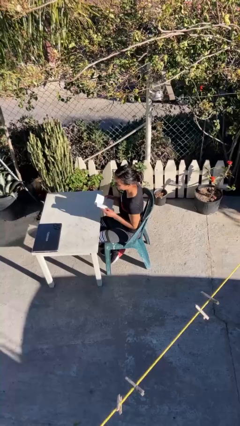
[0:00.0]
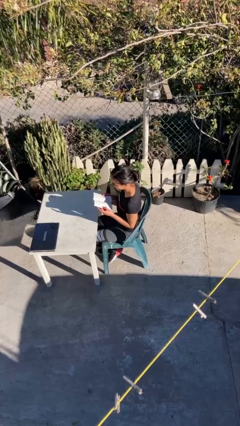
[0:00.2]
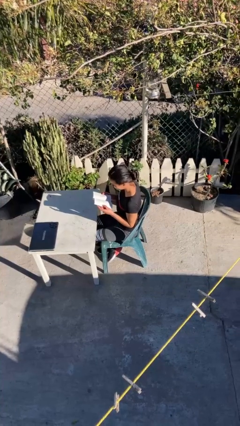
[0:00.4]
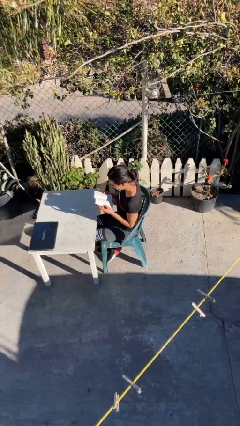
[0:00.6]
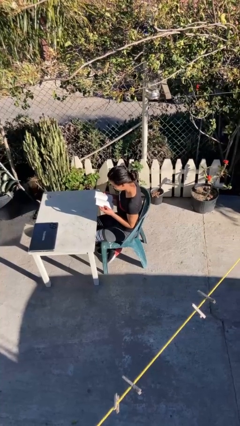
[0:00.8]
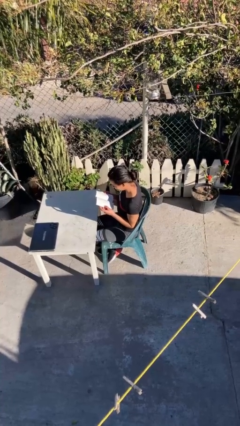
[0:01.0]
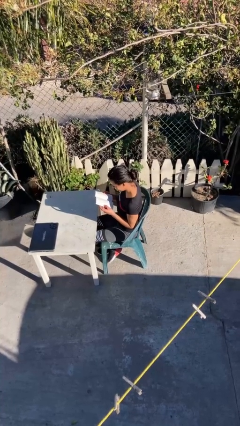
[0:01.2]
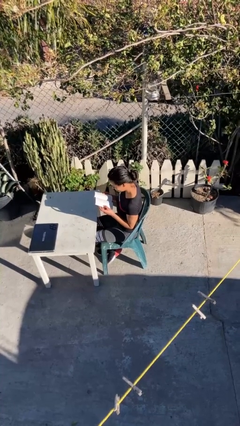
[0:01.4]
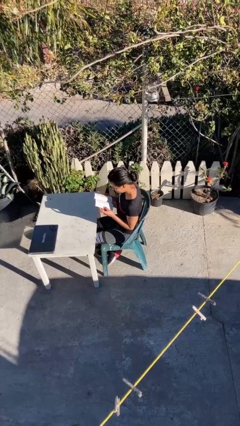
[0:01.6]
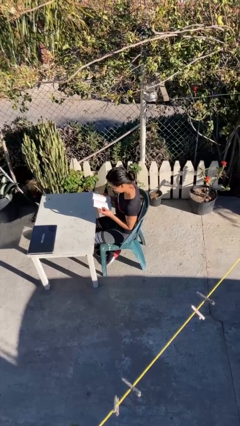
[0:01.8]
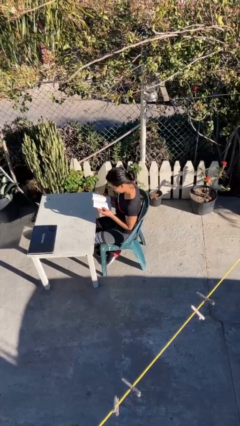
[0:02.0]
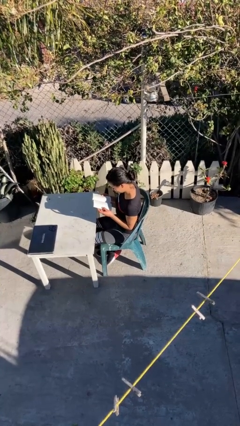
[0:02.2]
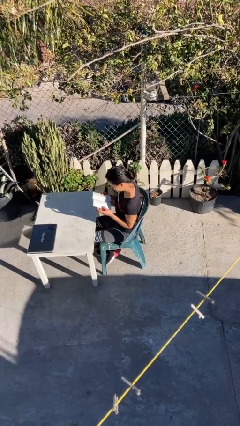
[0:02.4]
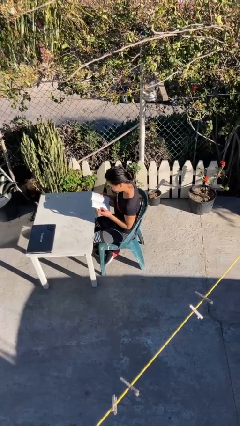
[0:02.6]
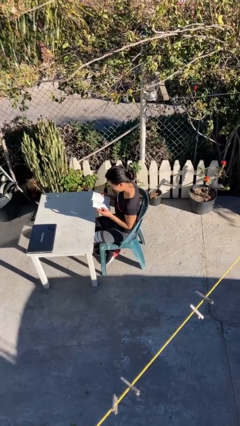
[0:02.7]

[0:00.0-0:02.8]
person reads document

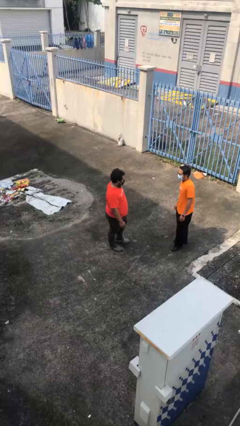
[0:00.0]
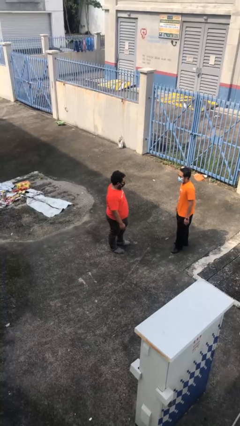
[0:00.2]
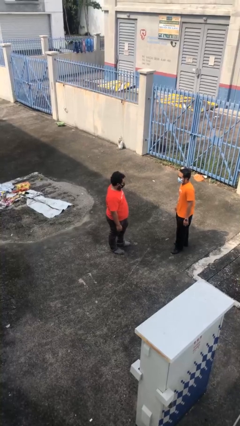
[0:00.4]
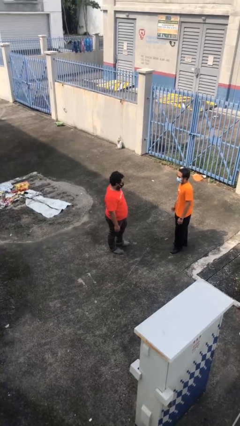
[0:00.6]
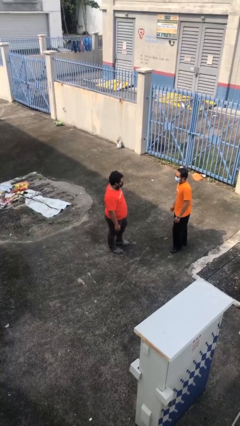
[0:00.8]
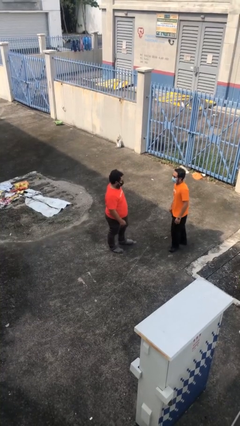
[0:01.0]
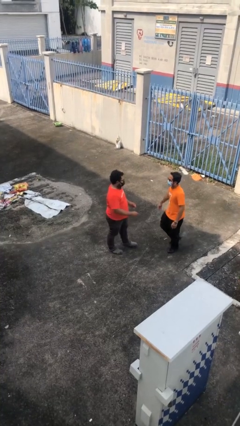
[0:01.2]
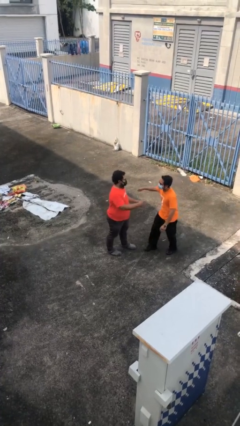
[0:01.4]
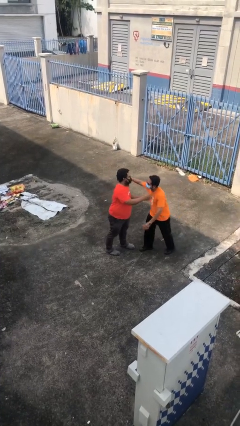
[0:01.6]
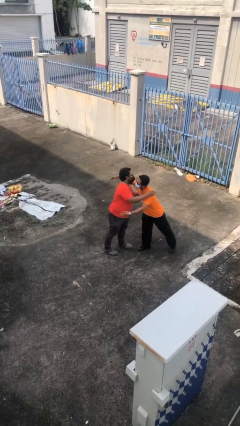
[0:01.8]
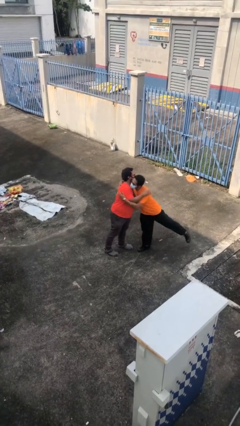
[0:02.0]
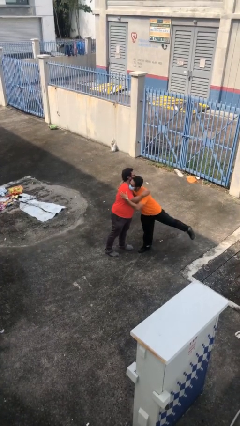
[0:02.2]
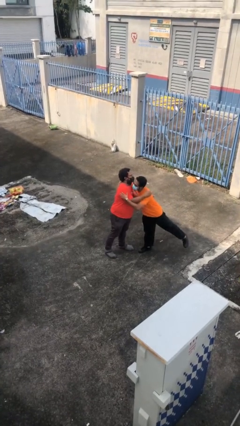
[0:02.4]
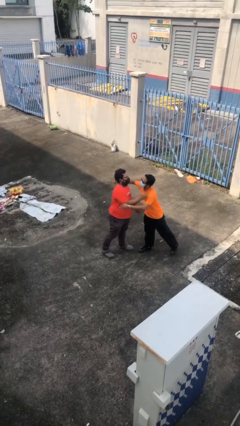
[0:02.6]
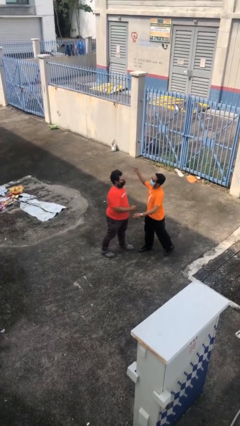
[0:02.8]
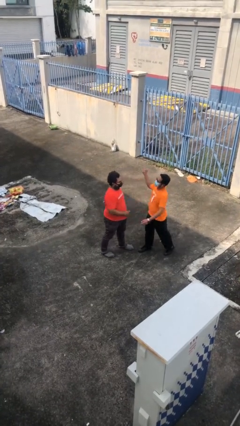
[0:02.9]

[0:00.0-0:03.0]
person embraces person

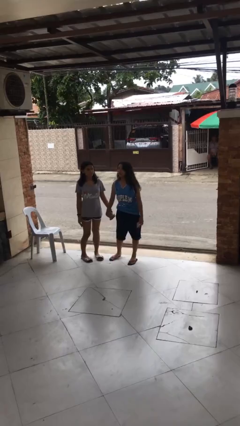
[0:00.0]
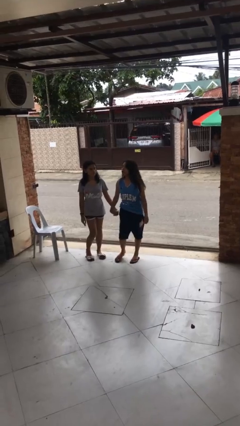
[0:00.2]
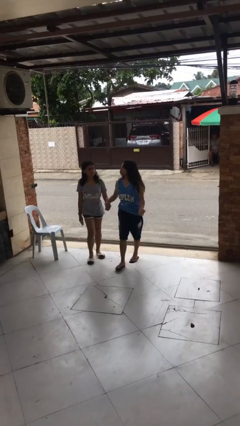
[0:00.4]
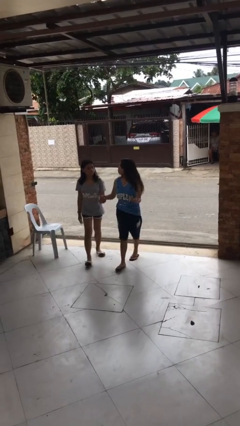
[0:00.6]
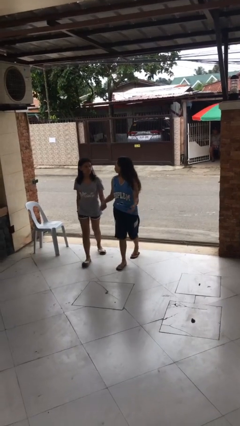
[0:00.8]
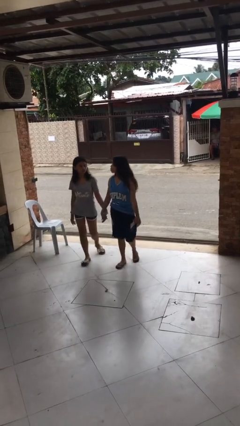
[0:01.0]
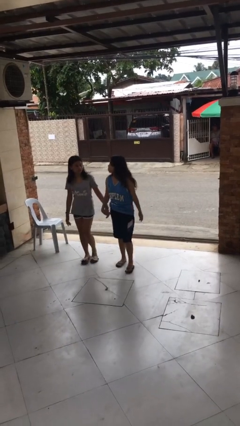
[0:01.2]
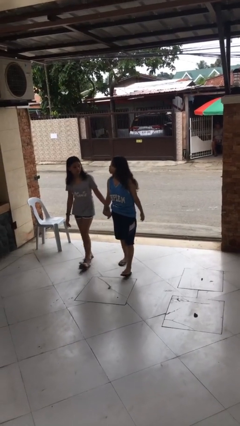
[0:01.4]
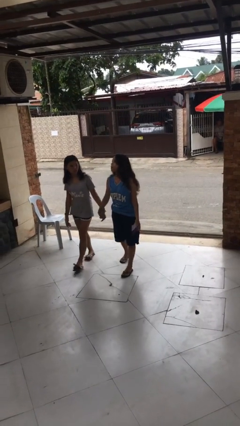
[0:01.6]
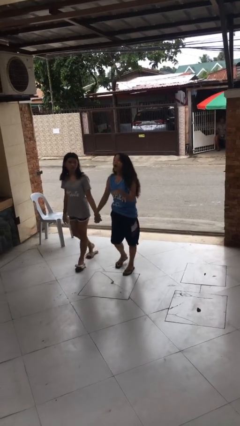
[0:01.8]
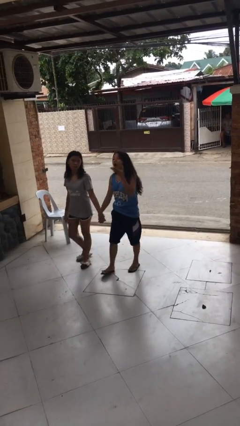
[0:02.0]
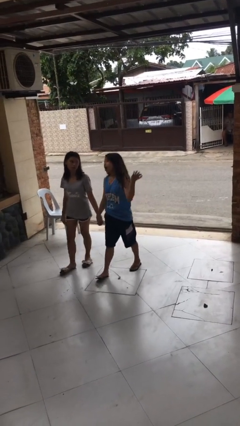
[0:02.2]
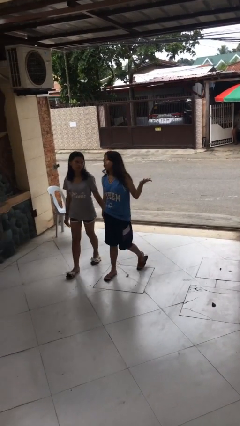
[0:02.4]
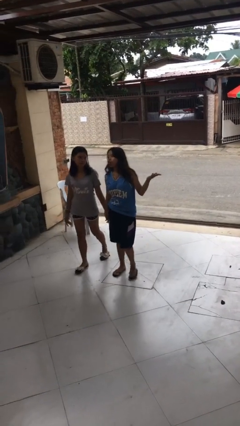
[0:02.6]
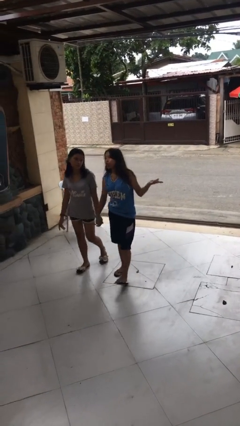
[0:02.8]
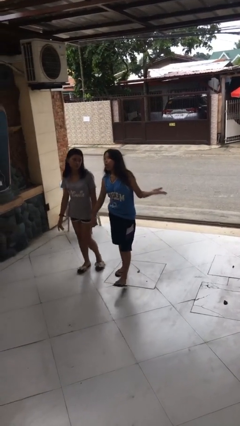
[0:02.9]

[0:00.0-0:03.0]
person holds hand

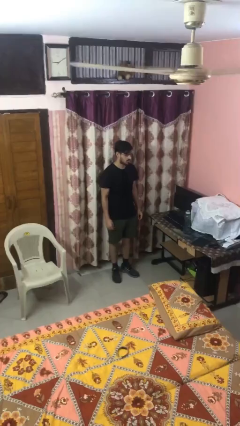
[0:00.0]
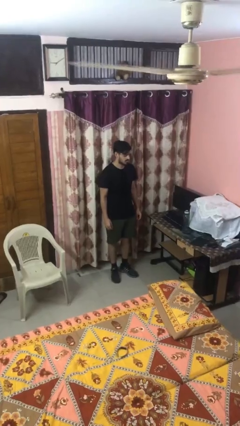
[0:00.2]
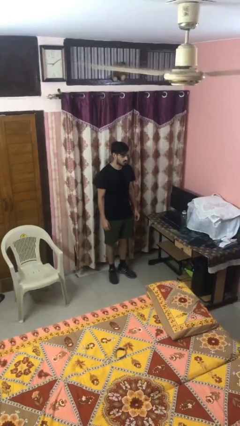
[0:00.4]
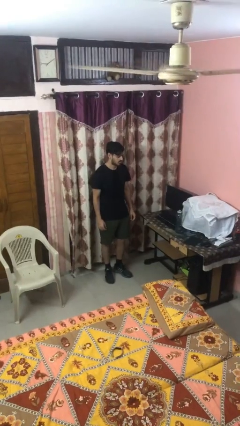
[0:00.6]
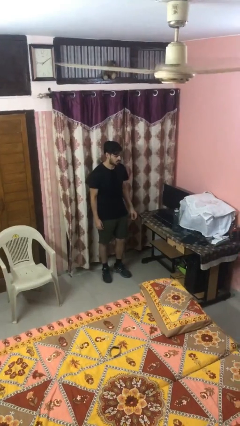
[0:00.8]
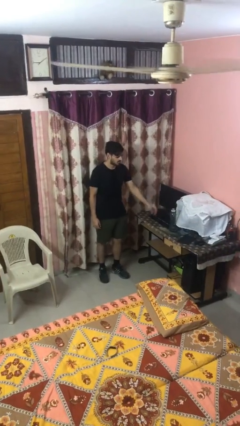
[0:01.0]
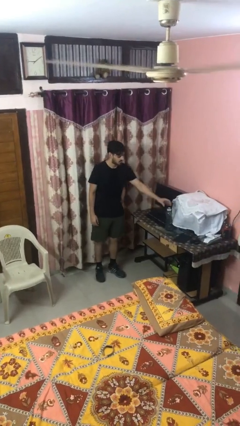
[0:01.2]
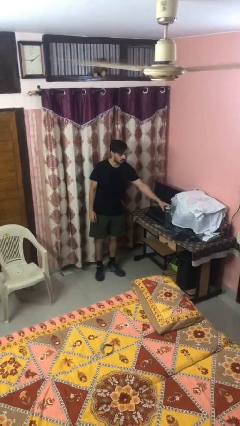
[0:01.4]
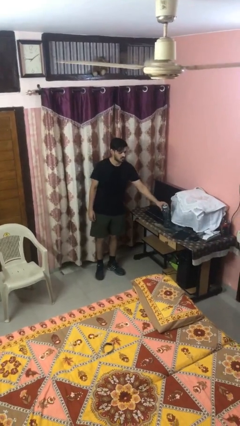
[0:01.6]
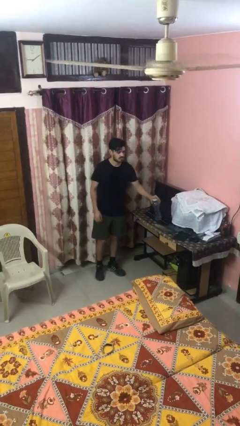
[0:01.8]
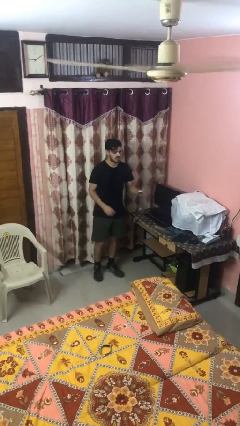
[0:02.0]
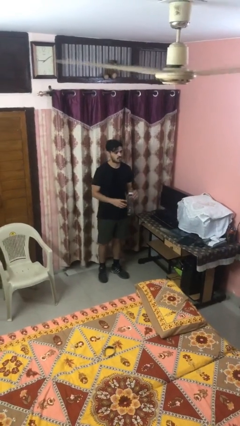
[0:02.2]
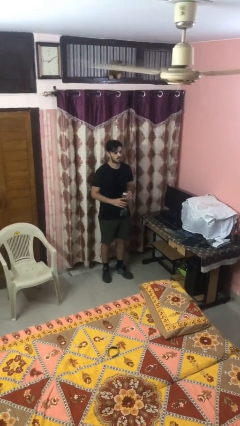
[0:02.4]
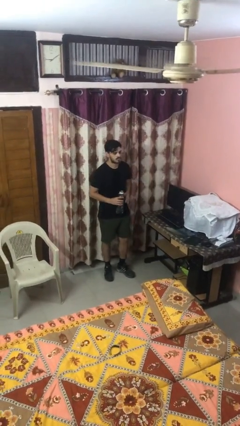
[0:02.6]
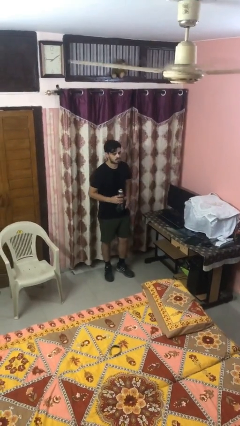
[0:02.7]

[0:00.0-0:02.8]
person picks up object from countertop

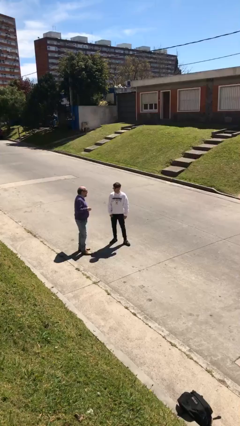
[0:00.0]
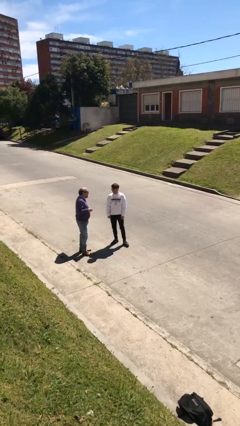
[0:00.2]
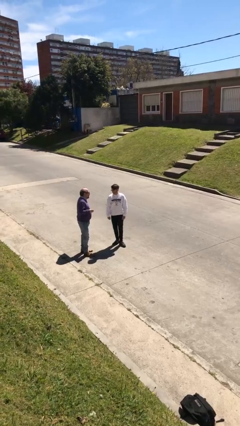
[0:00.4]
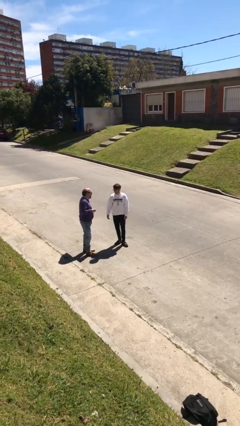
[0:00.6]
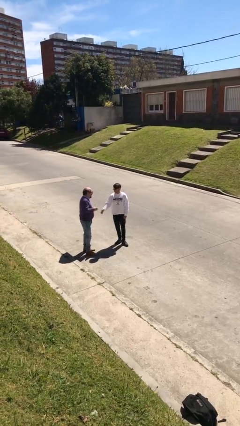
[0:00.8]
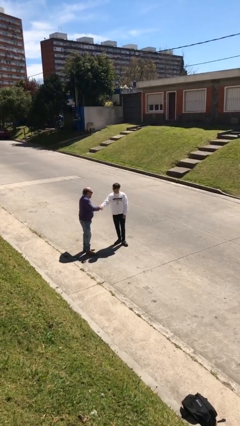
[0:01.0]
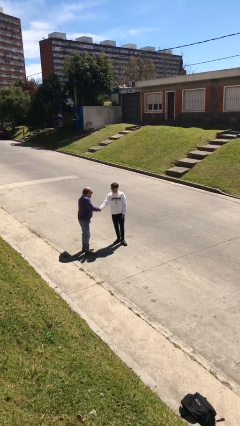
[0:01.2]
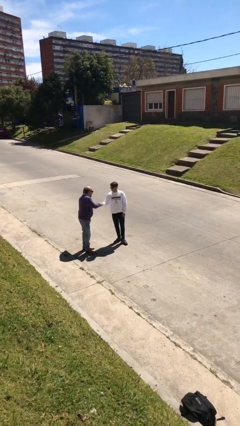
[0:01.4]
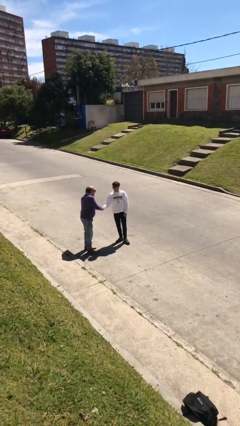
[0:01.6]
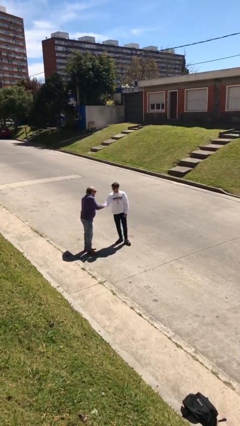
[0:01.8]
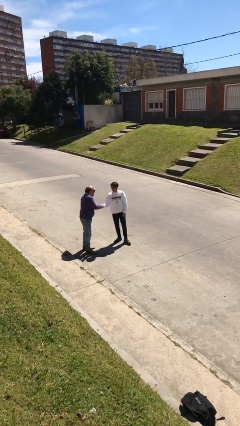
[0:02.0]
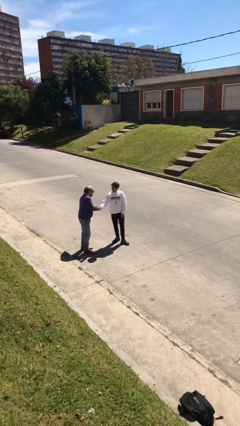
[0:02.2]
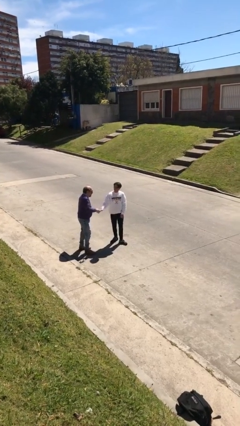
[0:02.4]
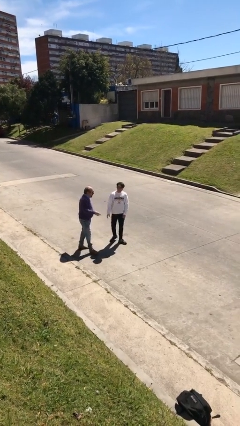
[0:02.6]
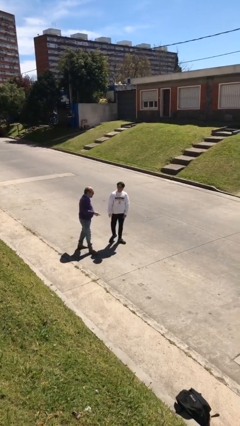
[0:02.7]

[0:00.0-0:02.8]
person shakes hand

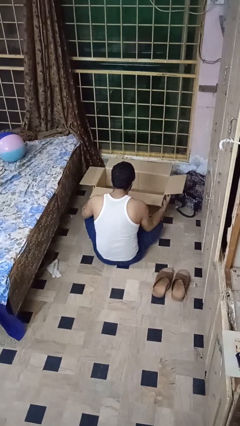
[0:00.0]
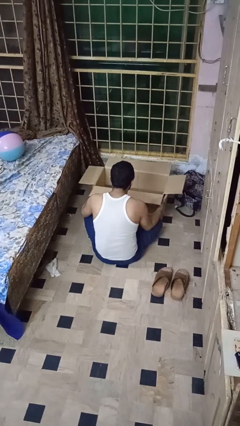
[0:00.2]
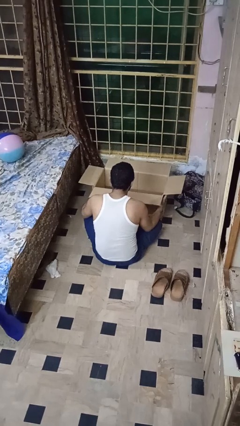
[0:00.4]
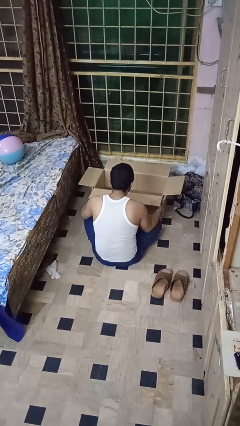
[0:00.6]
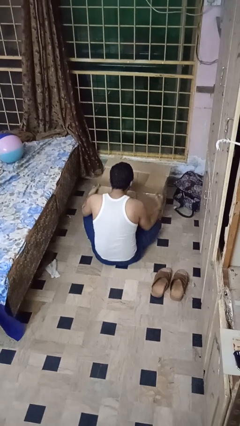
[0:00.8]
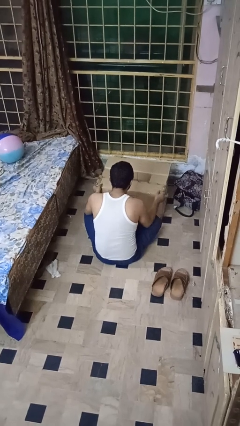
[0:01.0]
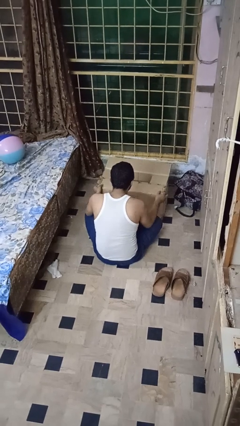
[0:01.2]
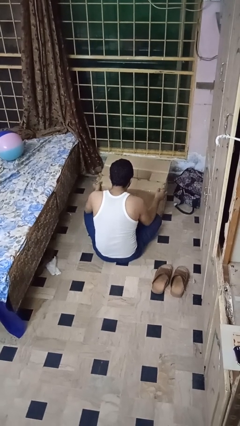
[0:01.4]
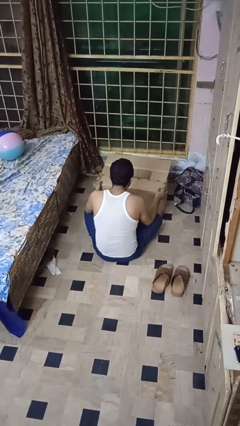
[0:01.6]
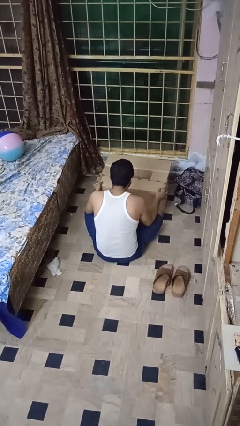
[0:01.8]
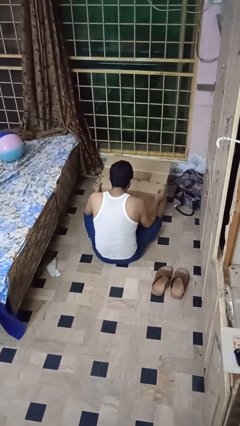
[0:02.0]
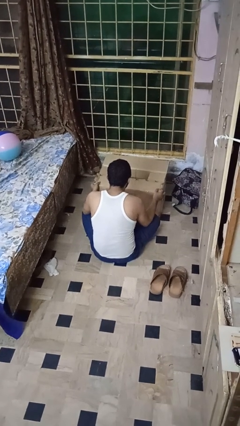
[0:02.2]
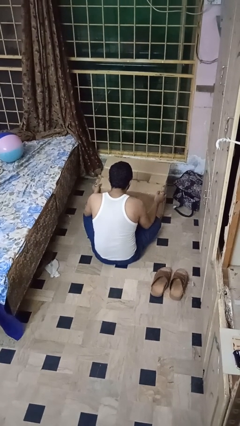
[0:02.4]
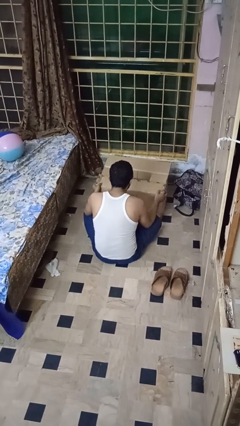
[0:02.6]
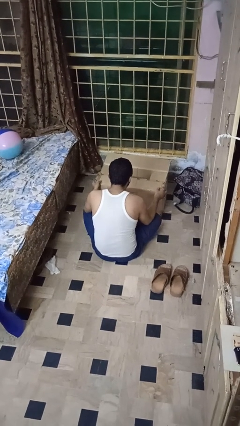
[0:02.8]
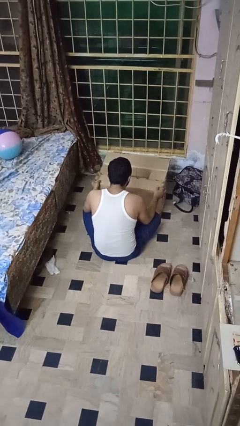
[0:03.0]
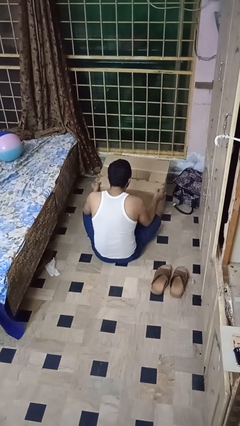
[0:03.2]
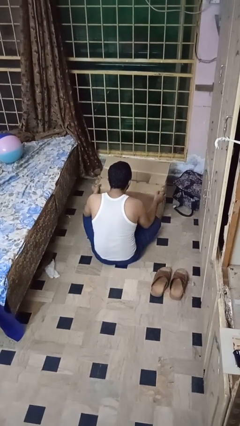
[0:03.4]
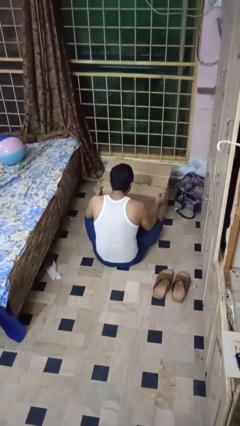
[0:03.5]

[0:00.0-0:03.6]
person closes box
